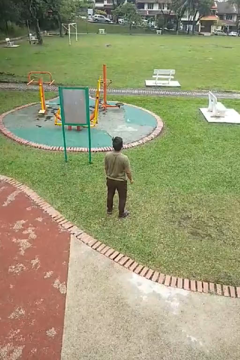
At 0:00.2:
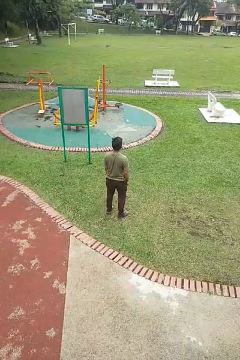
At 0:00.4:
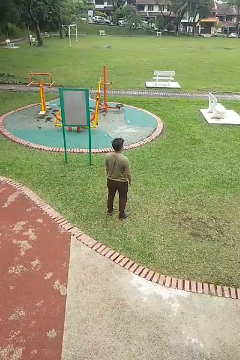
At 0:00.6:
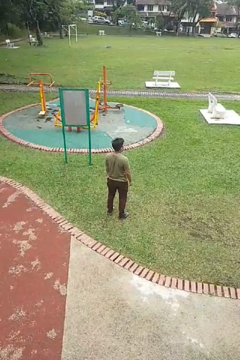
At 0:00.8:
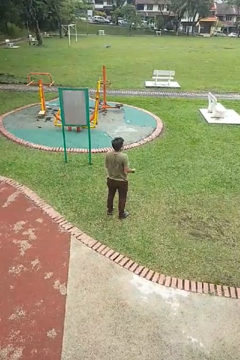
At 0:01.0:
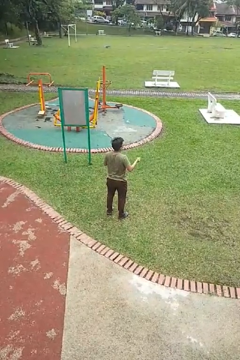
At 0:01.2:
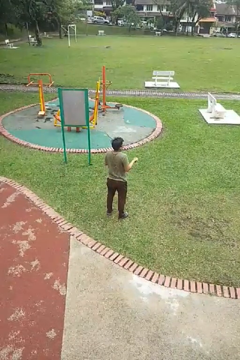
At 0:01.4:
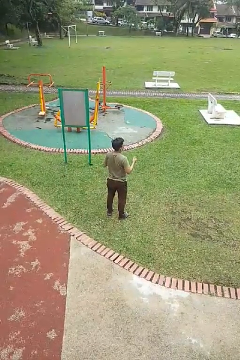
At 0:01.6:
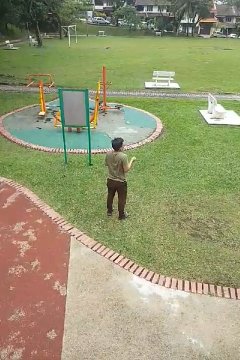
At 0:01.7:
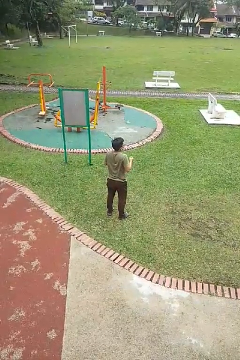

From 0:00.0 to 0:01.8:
person shrugs

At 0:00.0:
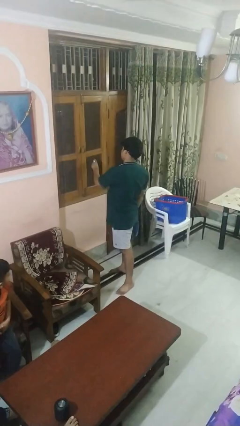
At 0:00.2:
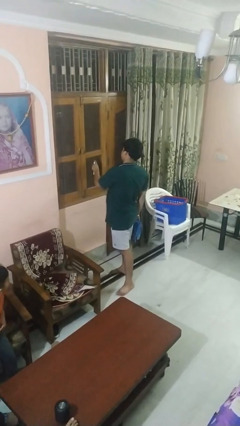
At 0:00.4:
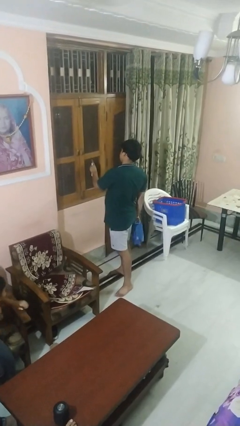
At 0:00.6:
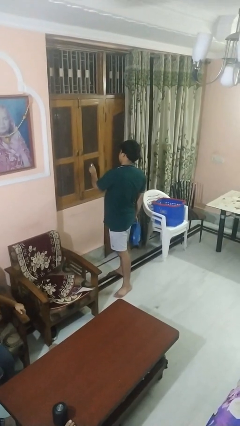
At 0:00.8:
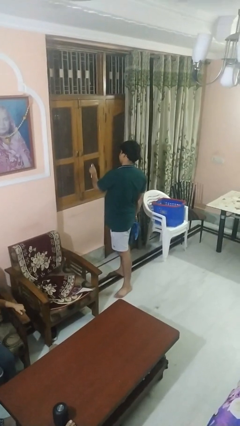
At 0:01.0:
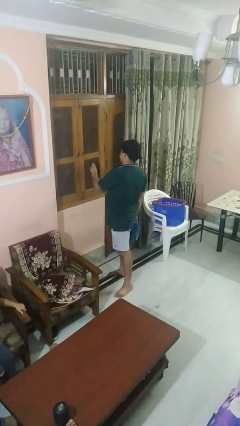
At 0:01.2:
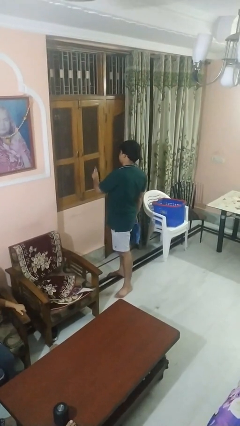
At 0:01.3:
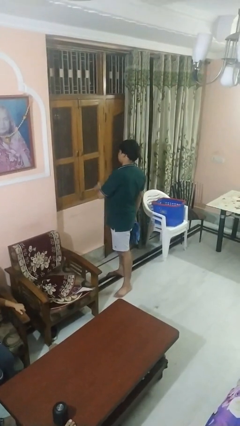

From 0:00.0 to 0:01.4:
person sprays from bottle

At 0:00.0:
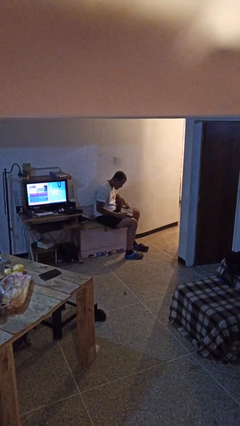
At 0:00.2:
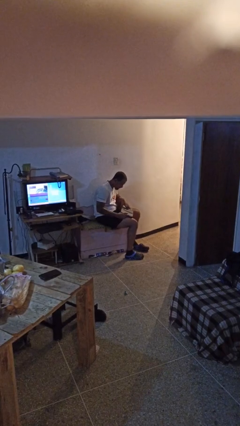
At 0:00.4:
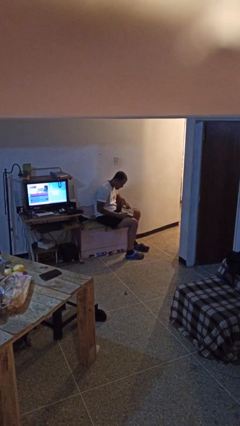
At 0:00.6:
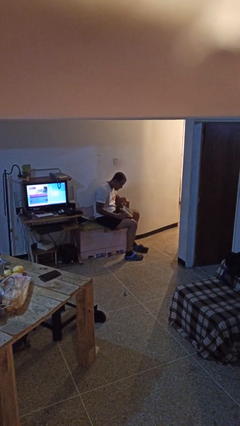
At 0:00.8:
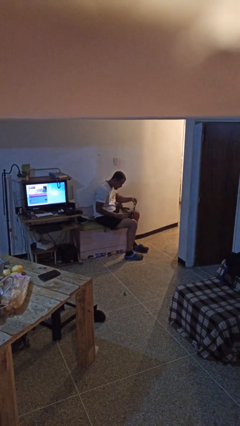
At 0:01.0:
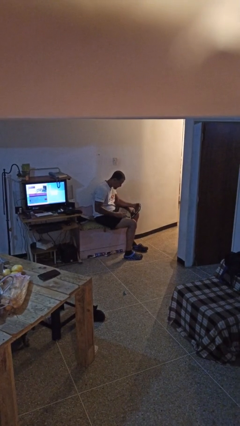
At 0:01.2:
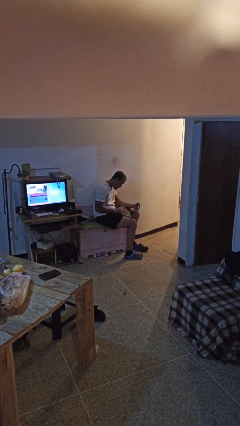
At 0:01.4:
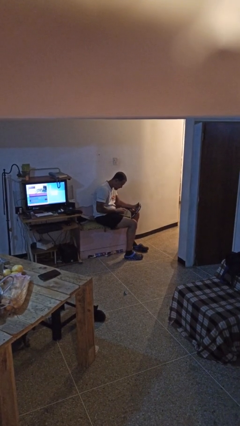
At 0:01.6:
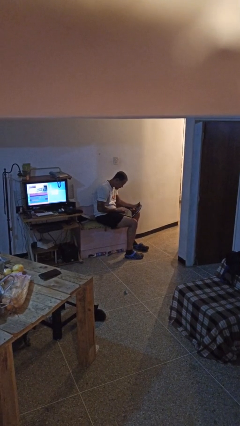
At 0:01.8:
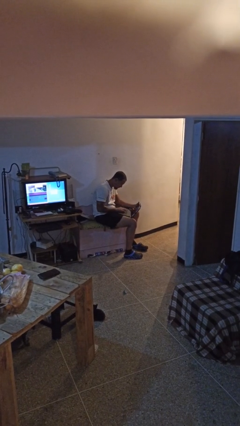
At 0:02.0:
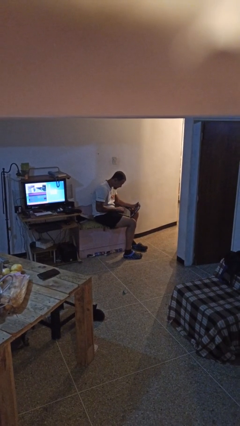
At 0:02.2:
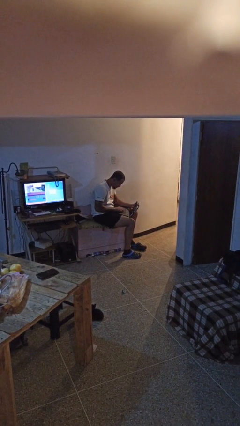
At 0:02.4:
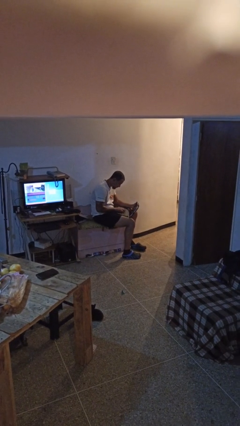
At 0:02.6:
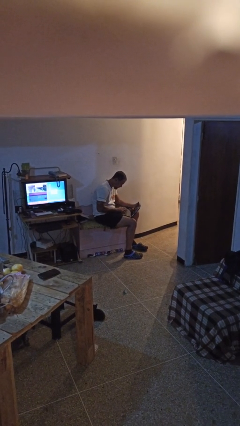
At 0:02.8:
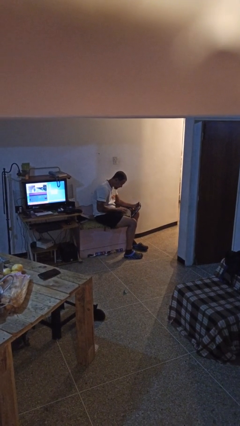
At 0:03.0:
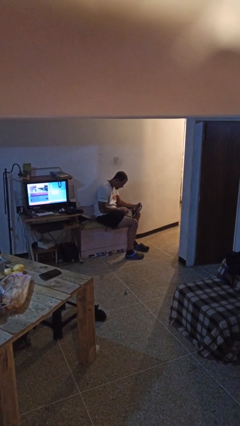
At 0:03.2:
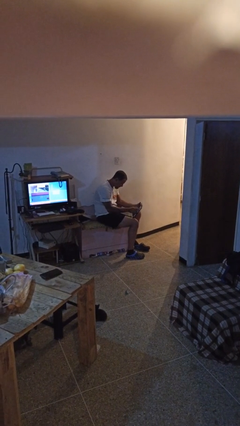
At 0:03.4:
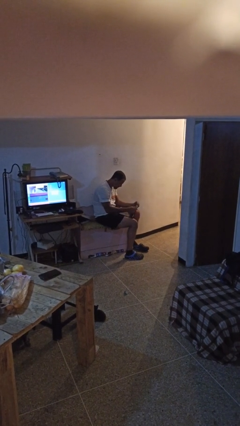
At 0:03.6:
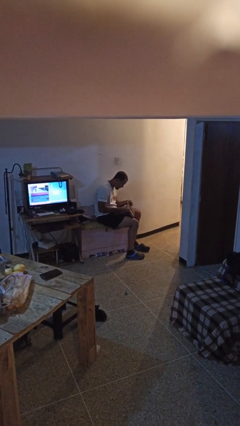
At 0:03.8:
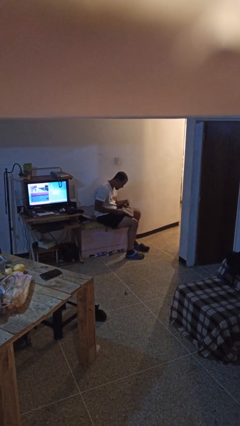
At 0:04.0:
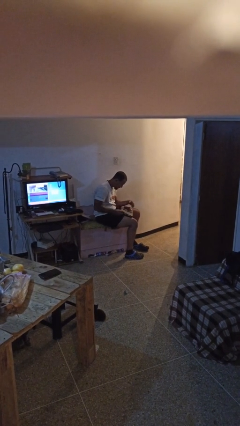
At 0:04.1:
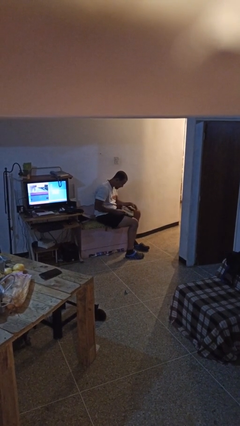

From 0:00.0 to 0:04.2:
person interacts with laptop

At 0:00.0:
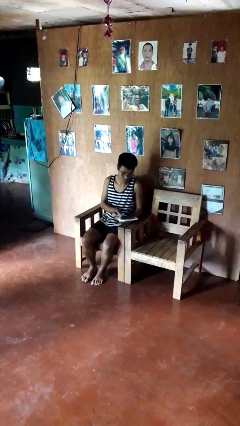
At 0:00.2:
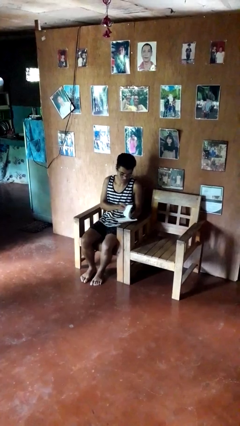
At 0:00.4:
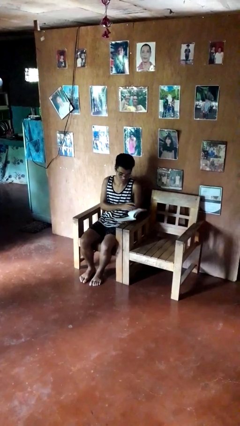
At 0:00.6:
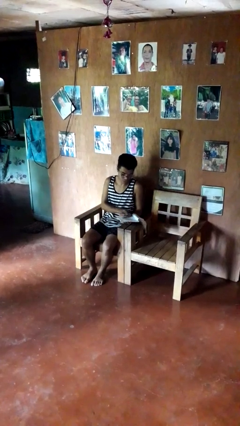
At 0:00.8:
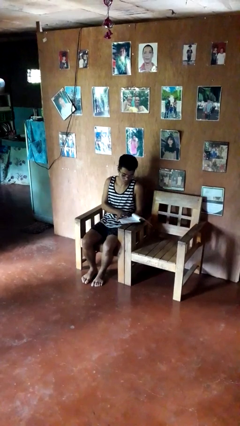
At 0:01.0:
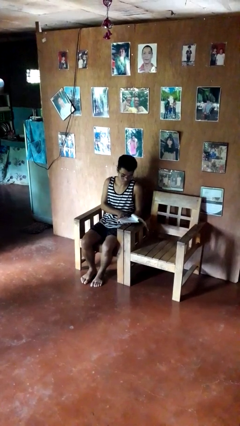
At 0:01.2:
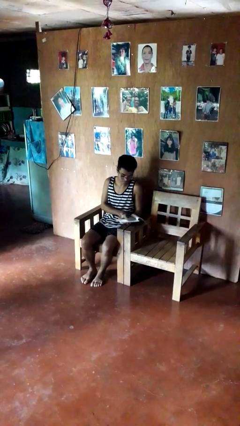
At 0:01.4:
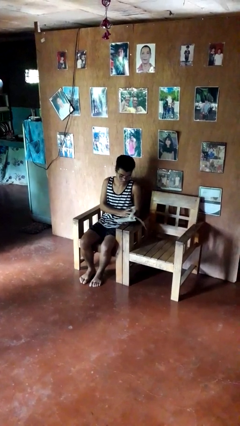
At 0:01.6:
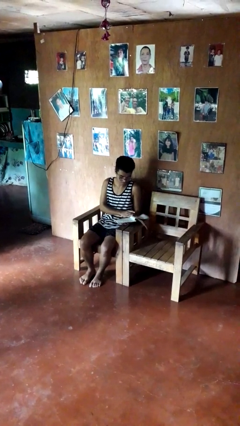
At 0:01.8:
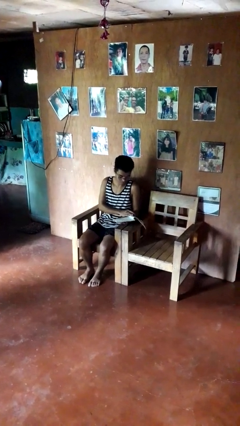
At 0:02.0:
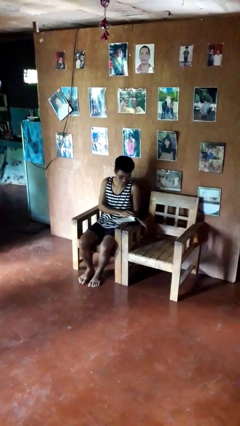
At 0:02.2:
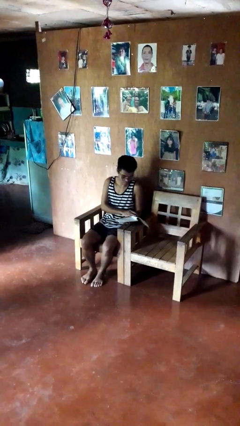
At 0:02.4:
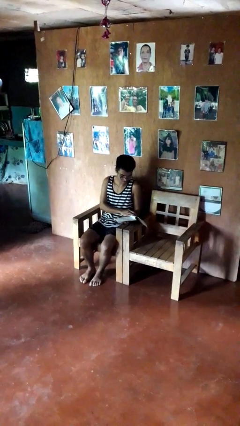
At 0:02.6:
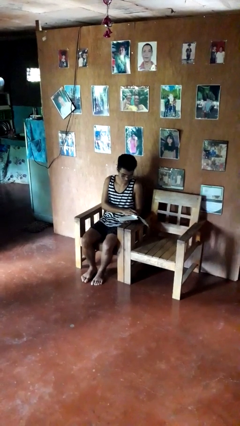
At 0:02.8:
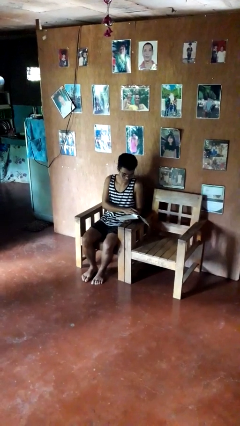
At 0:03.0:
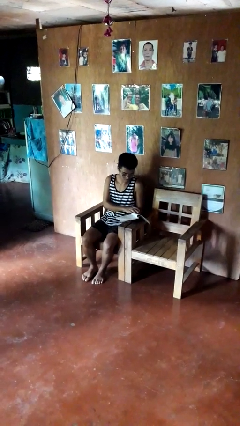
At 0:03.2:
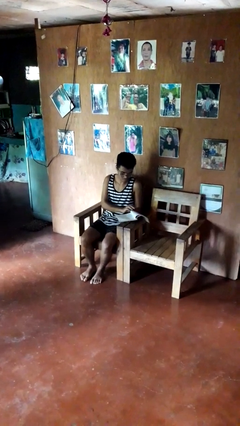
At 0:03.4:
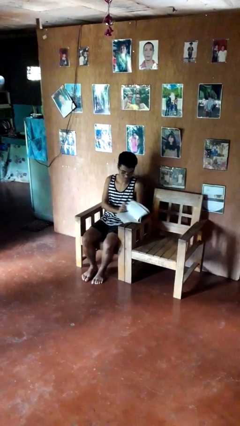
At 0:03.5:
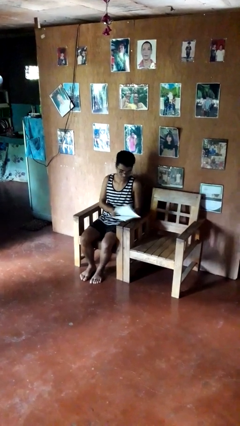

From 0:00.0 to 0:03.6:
person reads book

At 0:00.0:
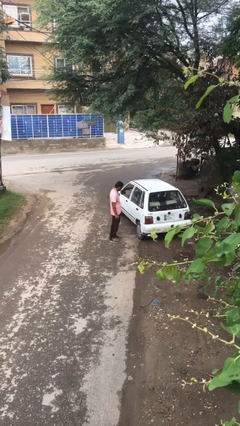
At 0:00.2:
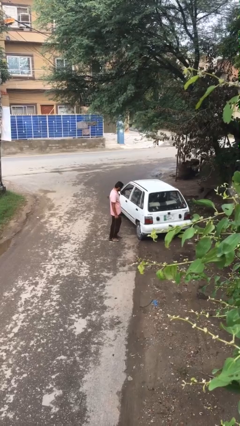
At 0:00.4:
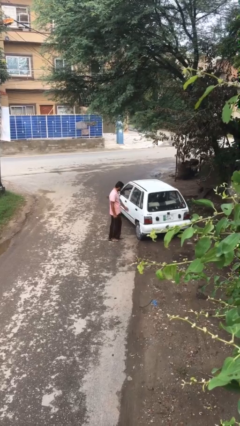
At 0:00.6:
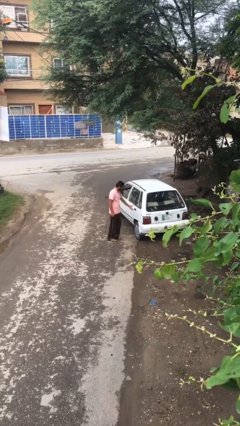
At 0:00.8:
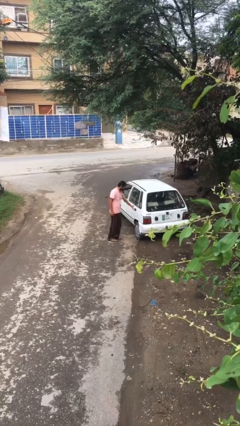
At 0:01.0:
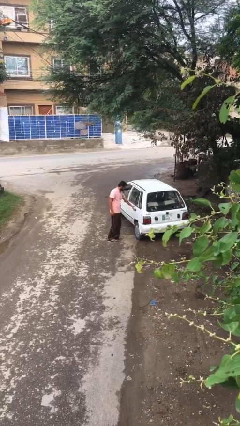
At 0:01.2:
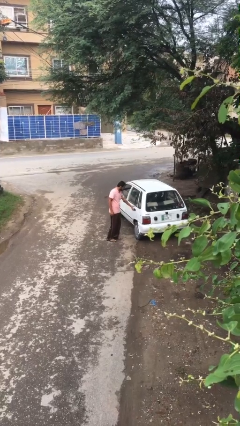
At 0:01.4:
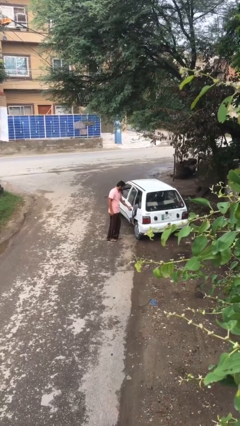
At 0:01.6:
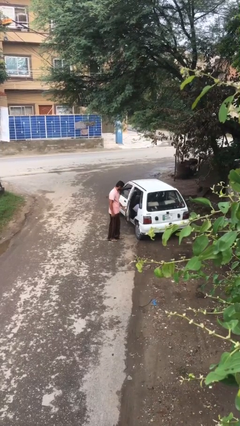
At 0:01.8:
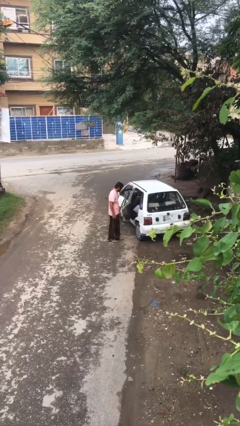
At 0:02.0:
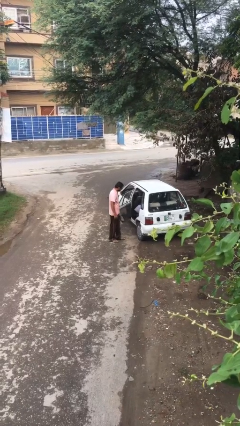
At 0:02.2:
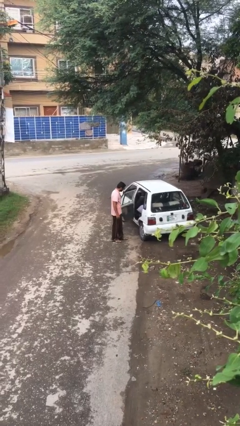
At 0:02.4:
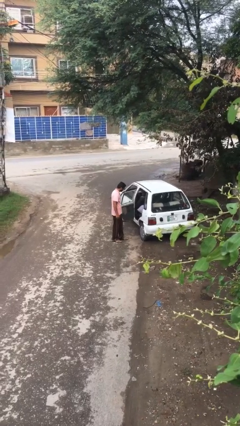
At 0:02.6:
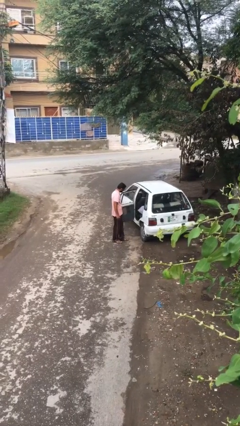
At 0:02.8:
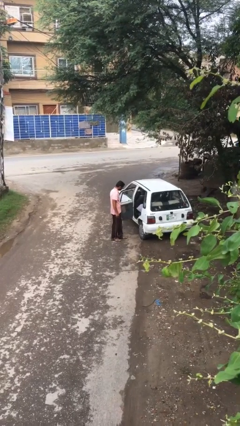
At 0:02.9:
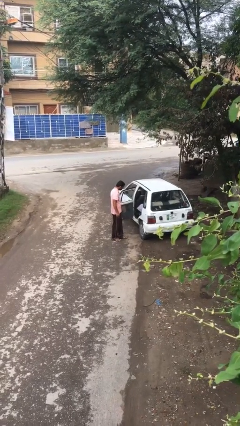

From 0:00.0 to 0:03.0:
person opens car door

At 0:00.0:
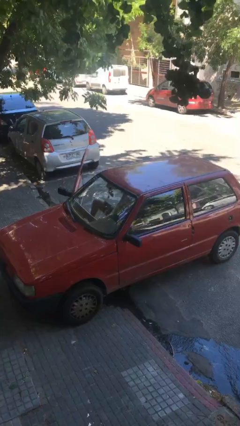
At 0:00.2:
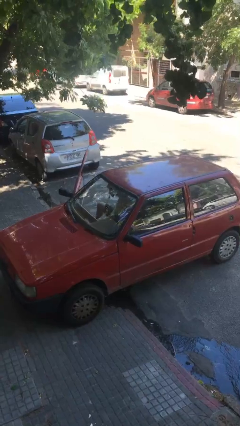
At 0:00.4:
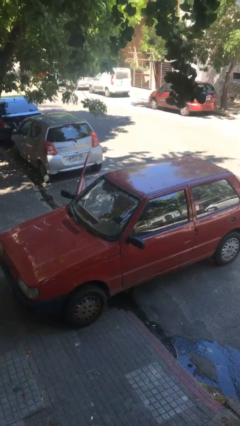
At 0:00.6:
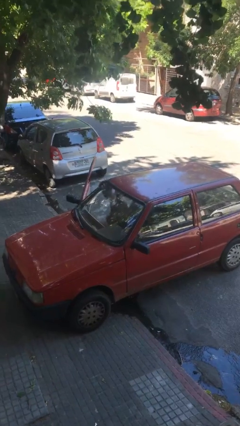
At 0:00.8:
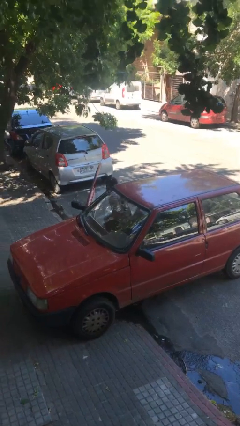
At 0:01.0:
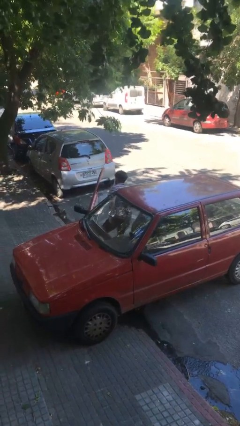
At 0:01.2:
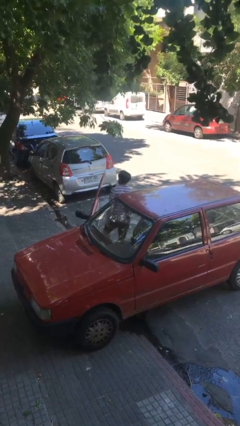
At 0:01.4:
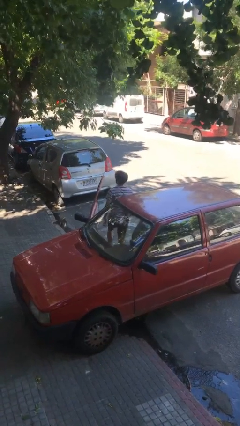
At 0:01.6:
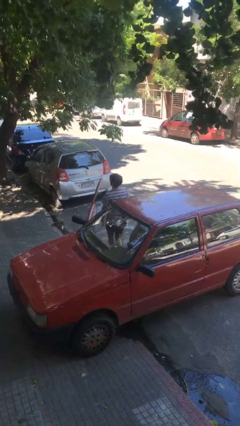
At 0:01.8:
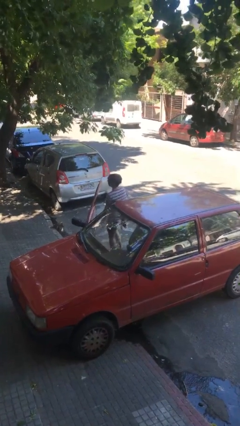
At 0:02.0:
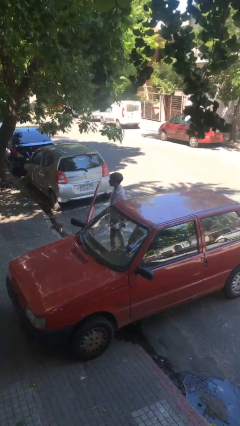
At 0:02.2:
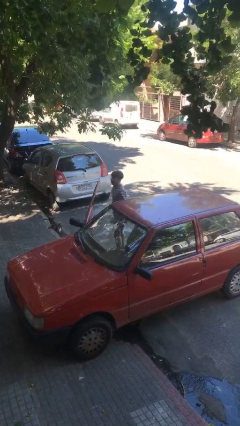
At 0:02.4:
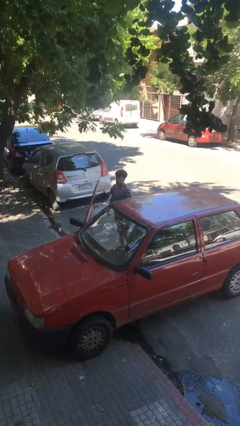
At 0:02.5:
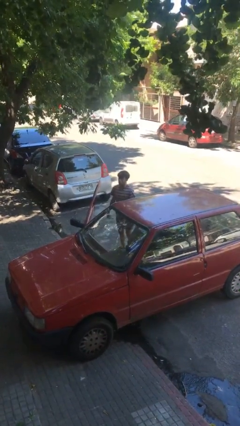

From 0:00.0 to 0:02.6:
person exits car

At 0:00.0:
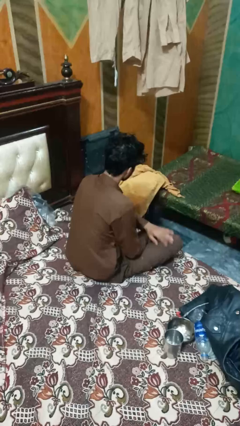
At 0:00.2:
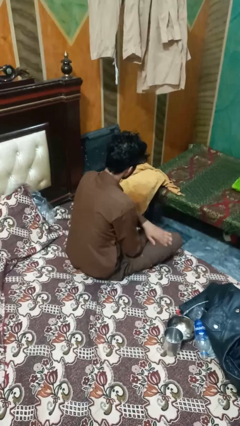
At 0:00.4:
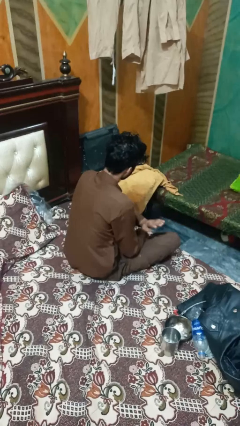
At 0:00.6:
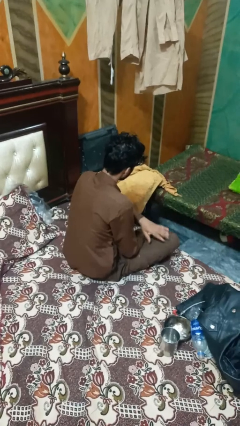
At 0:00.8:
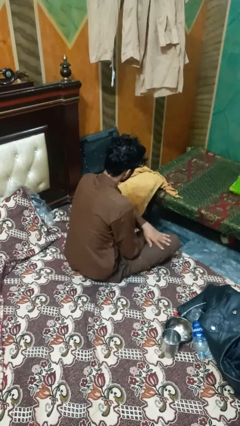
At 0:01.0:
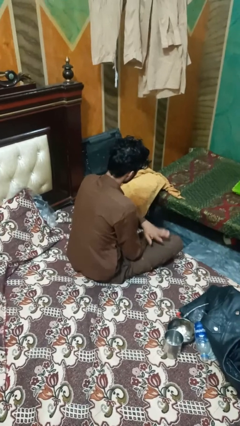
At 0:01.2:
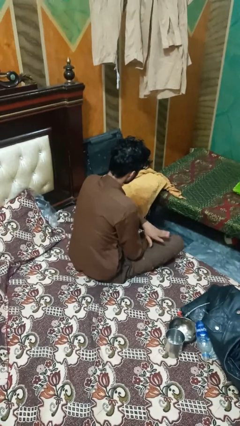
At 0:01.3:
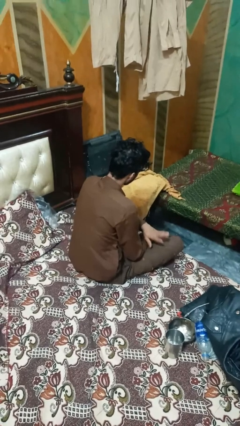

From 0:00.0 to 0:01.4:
person slaps hands on thighs
